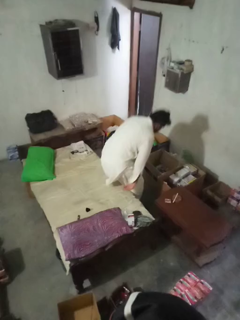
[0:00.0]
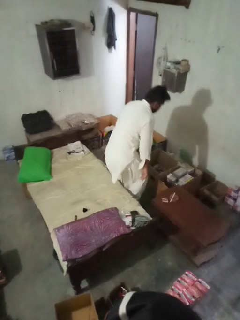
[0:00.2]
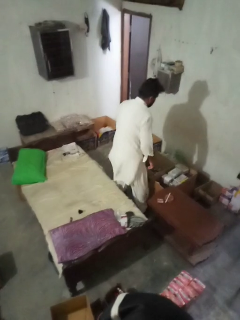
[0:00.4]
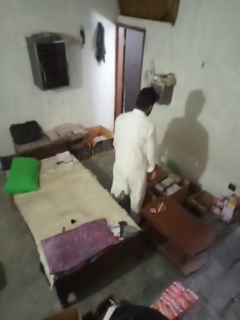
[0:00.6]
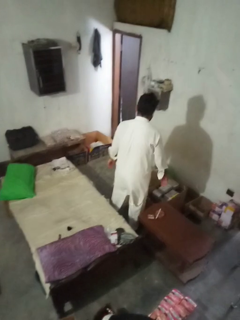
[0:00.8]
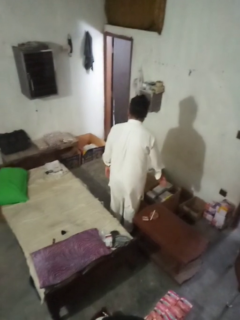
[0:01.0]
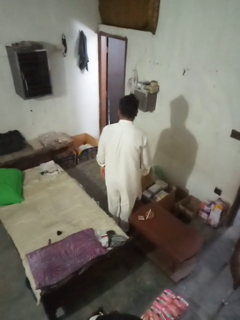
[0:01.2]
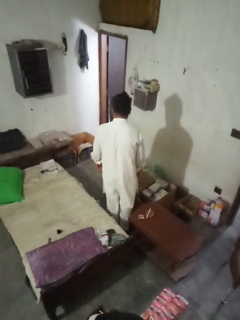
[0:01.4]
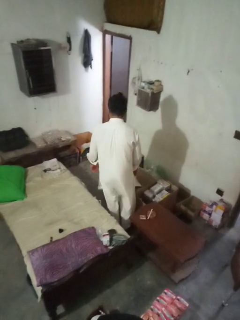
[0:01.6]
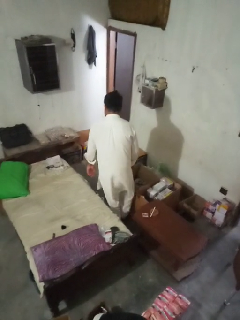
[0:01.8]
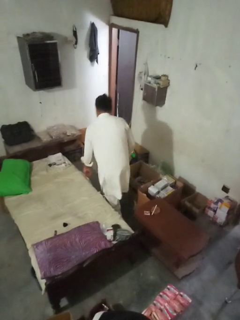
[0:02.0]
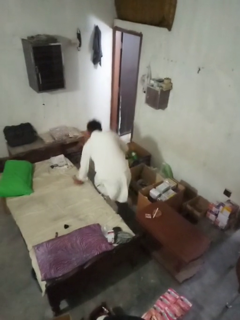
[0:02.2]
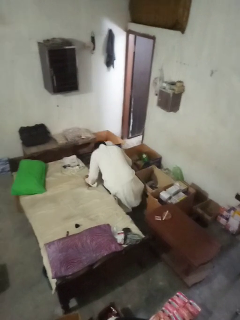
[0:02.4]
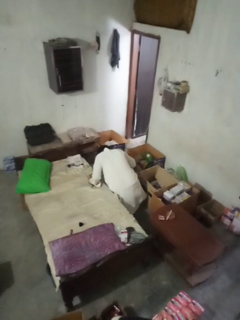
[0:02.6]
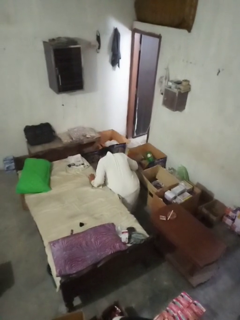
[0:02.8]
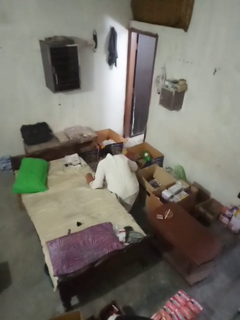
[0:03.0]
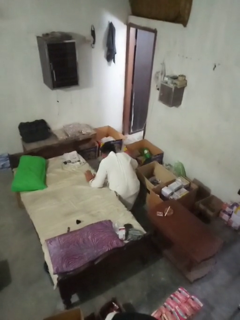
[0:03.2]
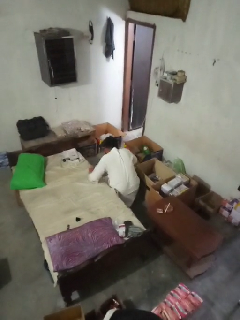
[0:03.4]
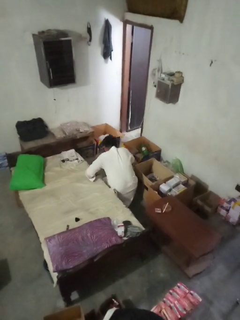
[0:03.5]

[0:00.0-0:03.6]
person falls from bed

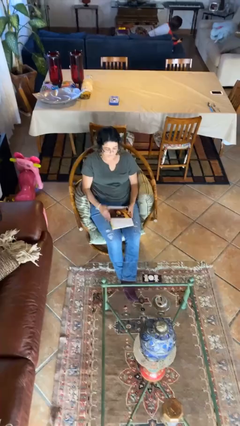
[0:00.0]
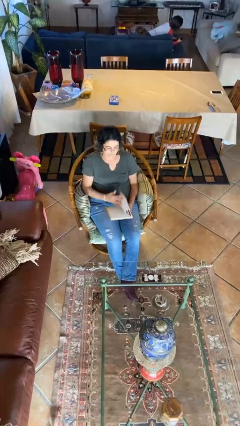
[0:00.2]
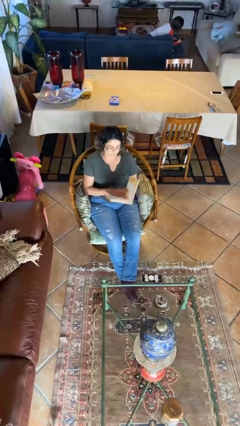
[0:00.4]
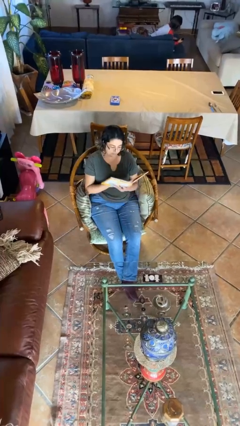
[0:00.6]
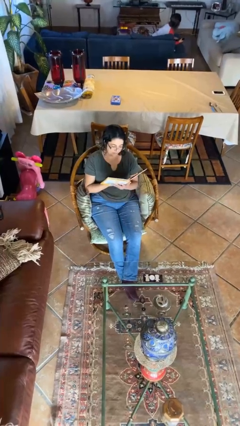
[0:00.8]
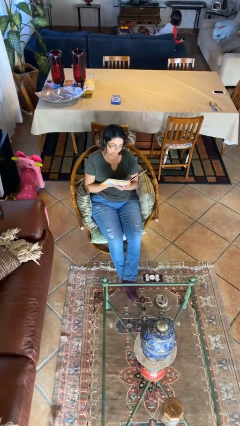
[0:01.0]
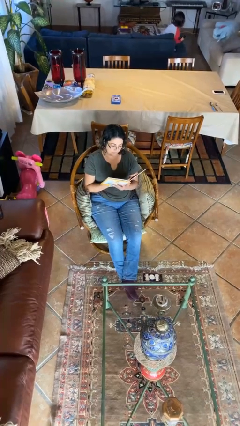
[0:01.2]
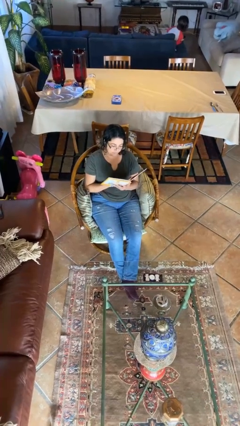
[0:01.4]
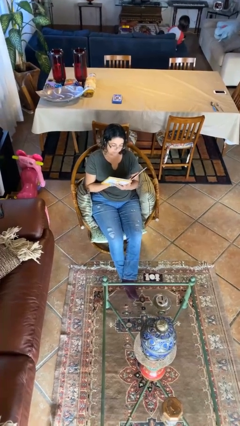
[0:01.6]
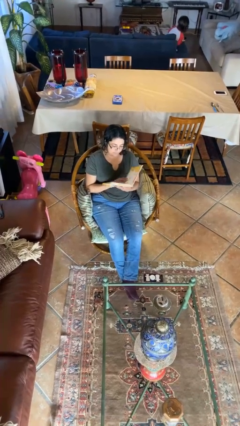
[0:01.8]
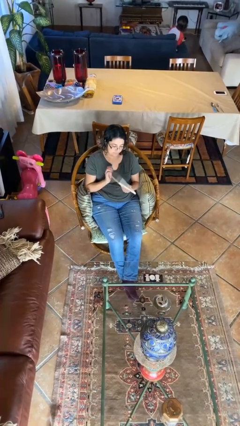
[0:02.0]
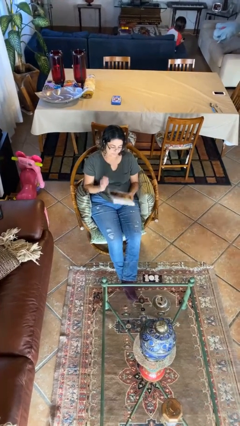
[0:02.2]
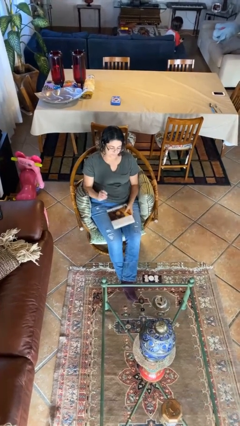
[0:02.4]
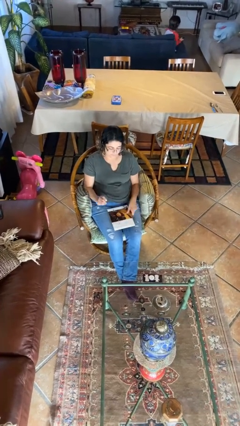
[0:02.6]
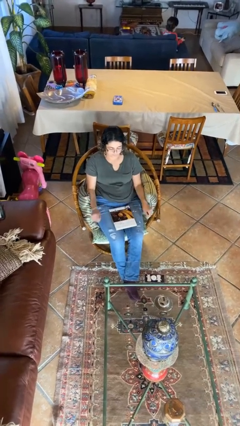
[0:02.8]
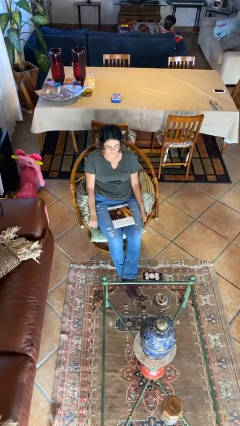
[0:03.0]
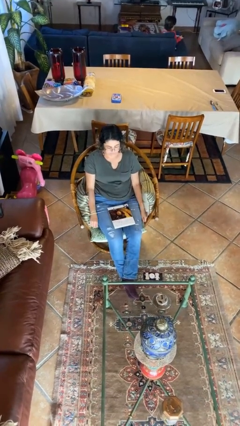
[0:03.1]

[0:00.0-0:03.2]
person reads document

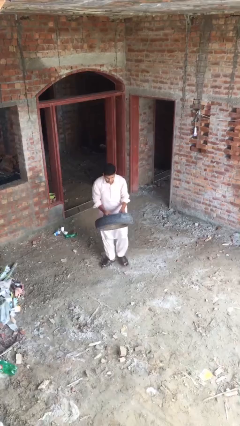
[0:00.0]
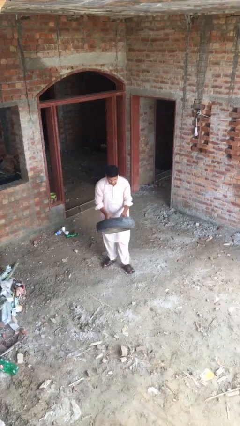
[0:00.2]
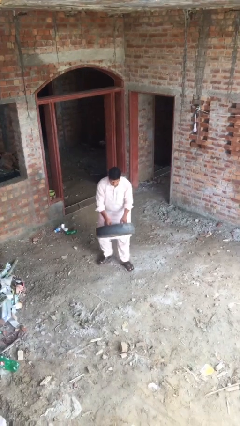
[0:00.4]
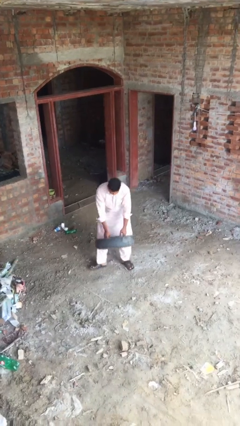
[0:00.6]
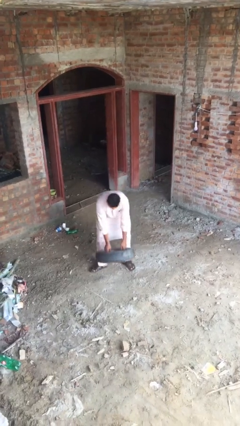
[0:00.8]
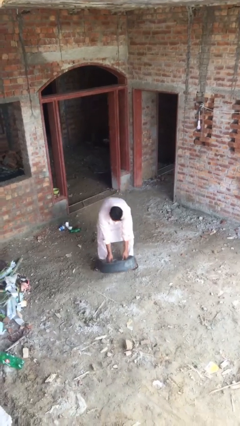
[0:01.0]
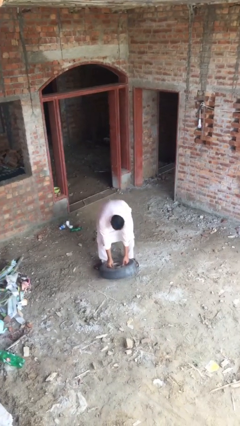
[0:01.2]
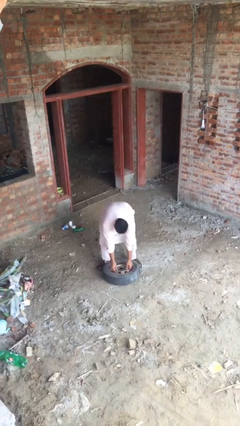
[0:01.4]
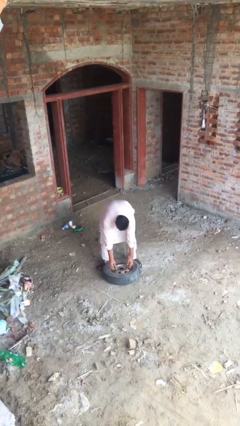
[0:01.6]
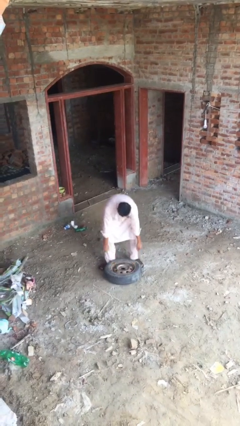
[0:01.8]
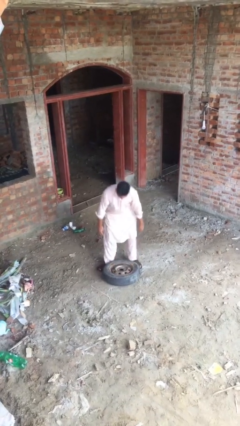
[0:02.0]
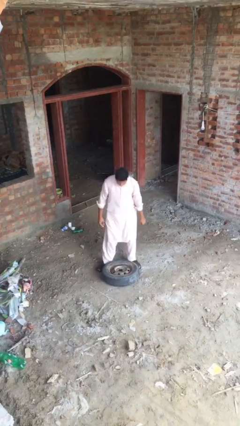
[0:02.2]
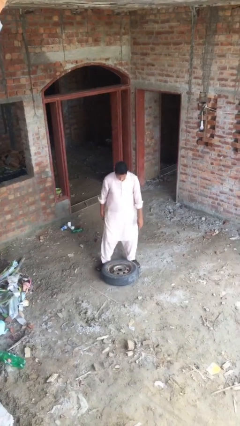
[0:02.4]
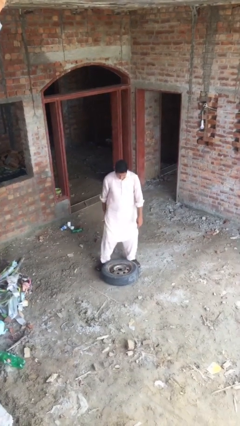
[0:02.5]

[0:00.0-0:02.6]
person puts down object on floor

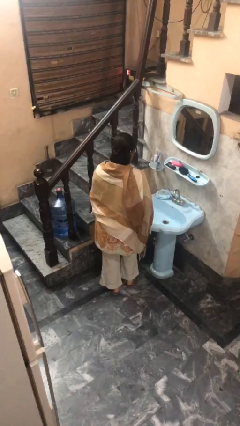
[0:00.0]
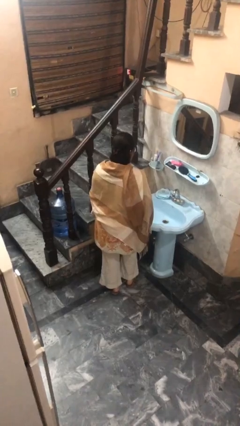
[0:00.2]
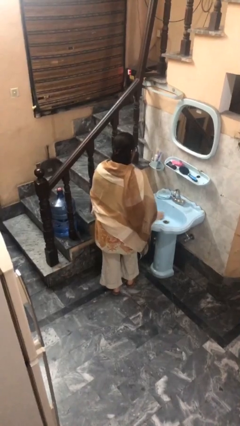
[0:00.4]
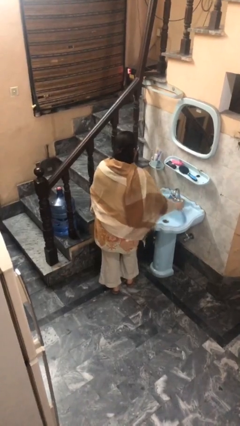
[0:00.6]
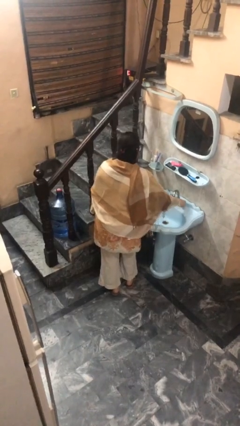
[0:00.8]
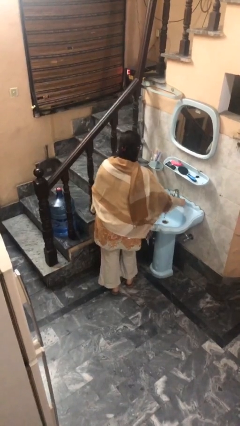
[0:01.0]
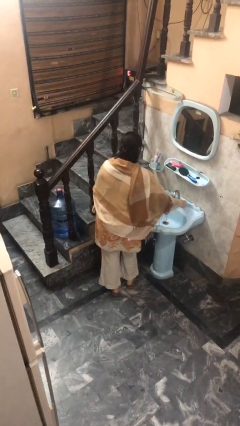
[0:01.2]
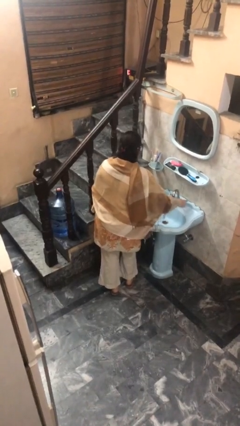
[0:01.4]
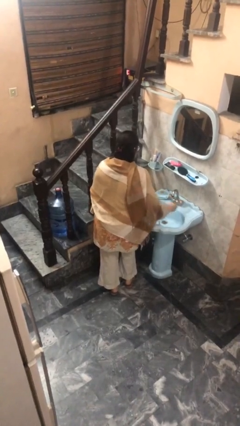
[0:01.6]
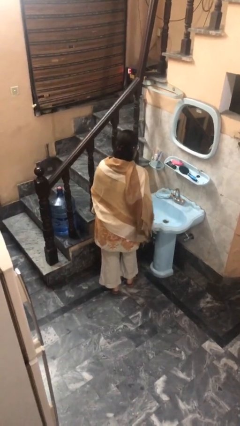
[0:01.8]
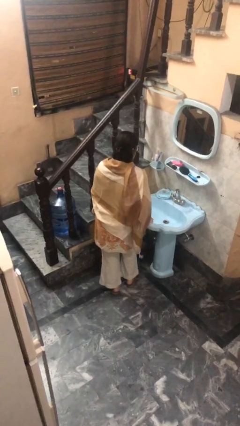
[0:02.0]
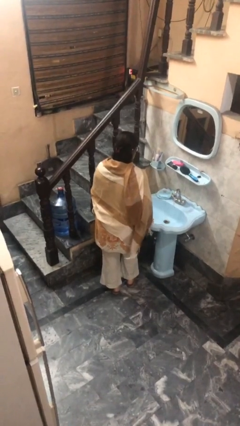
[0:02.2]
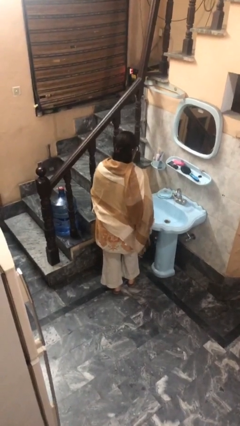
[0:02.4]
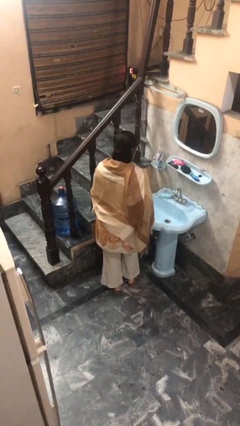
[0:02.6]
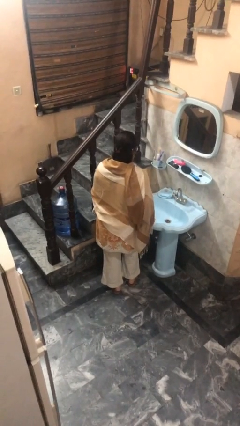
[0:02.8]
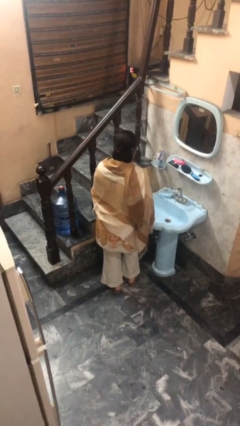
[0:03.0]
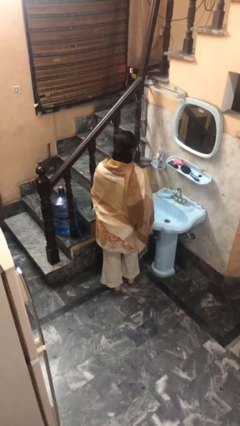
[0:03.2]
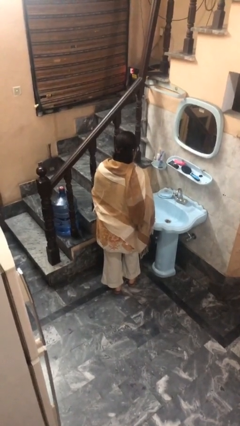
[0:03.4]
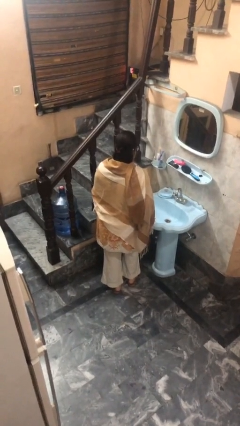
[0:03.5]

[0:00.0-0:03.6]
person turns on faucet

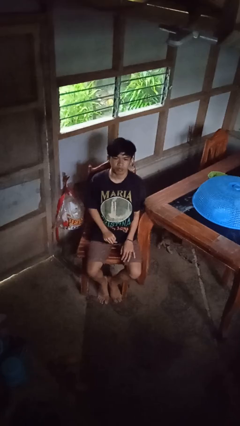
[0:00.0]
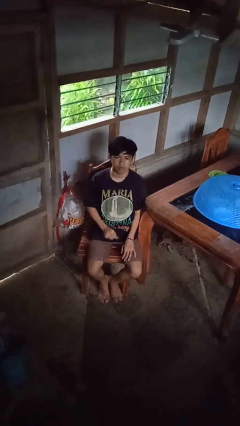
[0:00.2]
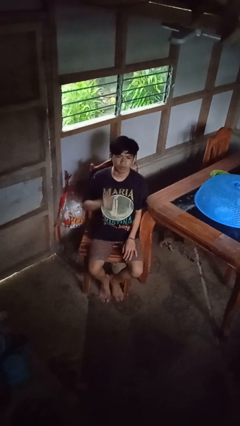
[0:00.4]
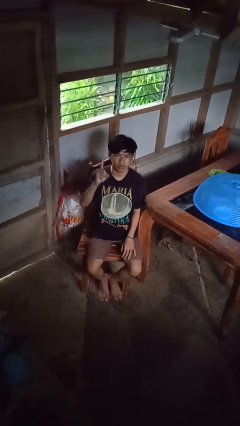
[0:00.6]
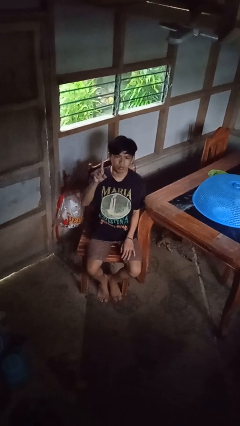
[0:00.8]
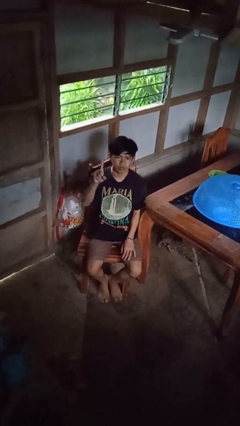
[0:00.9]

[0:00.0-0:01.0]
person gestures number one

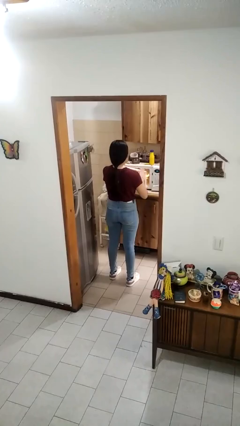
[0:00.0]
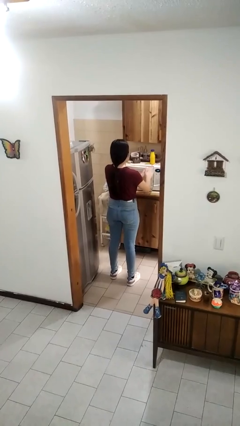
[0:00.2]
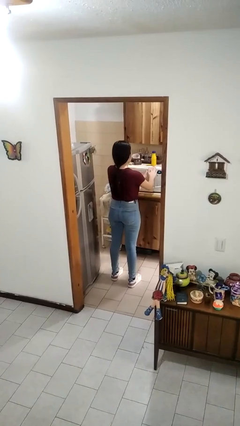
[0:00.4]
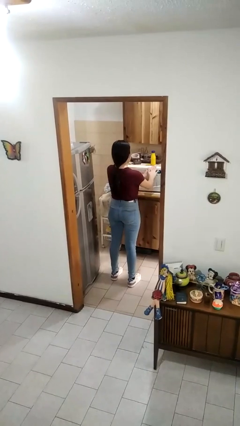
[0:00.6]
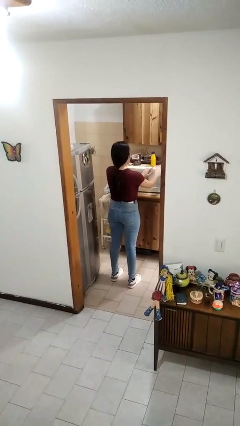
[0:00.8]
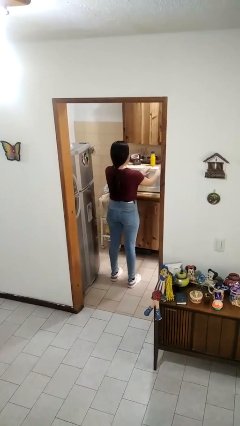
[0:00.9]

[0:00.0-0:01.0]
person closes microwave

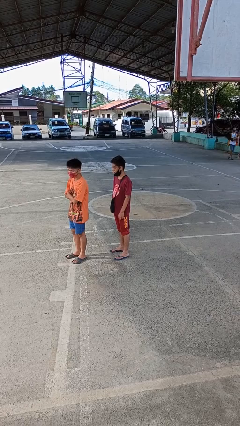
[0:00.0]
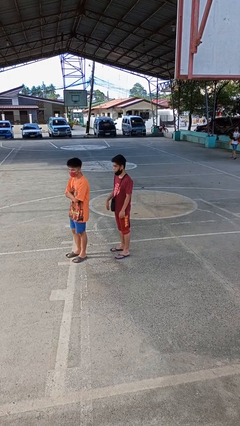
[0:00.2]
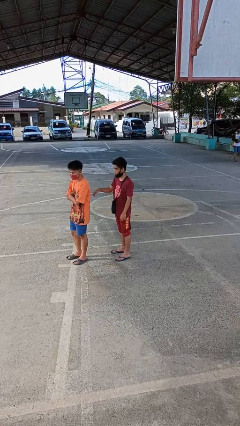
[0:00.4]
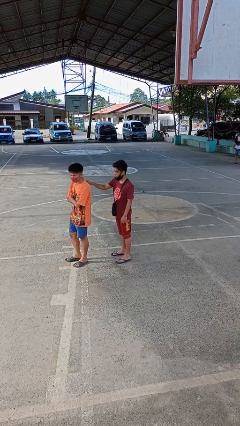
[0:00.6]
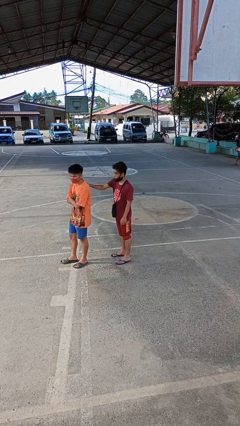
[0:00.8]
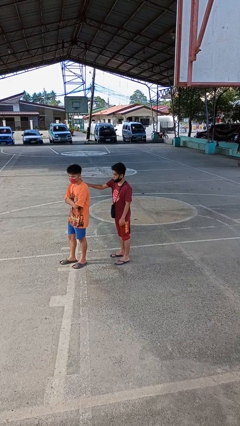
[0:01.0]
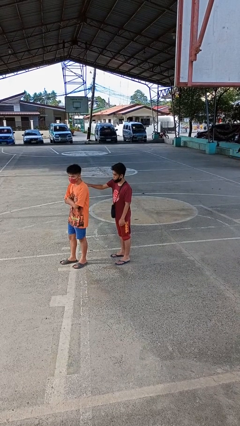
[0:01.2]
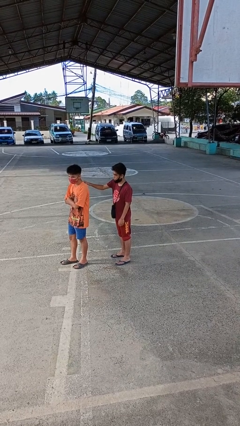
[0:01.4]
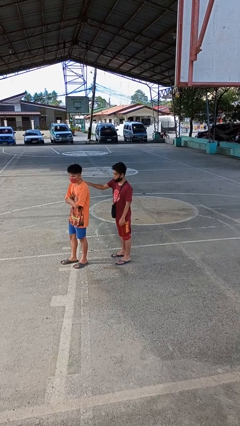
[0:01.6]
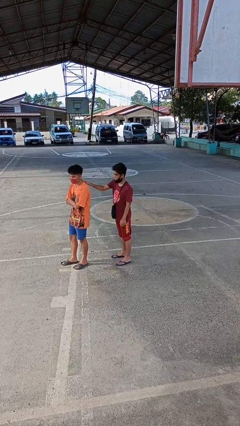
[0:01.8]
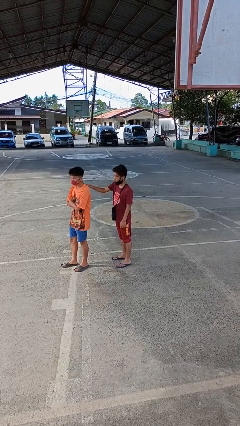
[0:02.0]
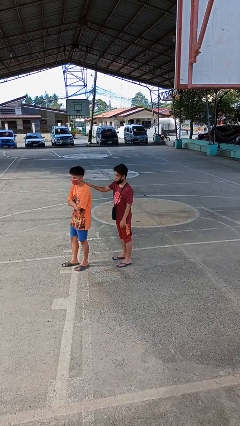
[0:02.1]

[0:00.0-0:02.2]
person touches back of person

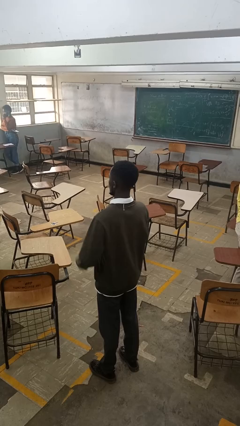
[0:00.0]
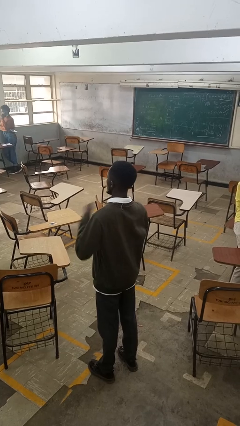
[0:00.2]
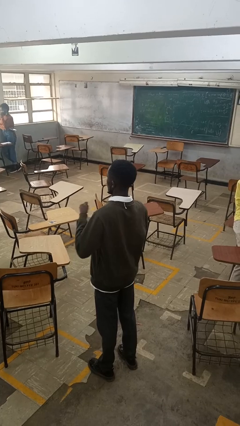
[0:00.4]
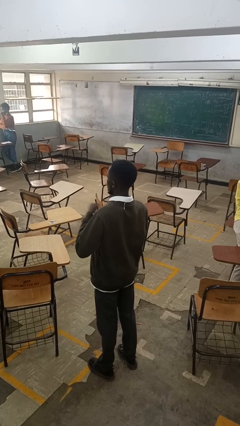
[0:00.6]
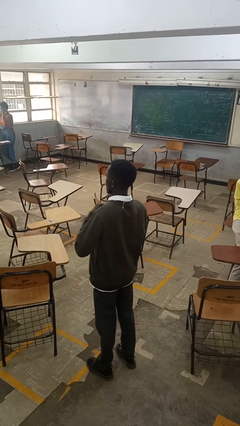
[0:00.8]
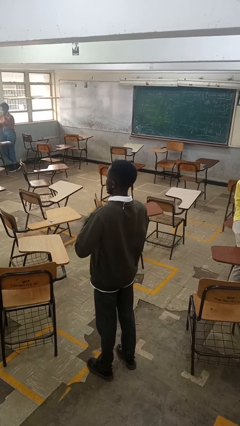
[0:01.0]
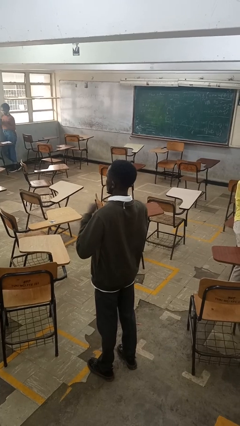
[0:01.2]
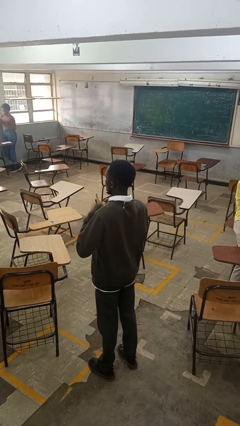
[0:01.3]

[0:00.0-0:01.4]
person drums on chest
